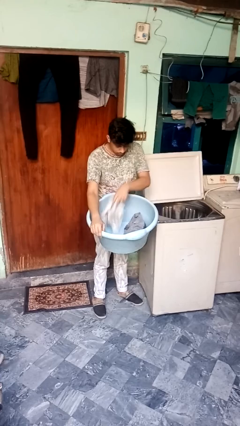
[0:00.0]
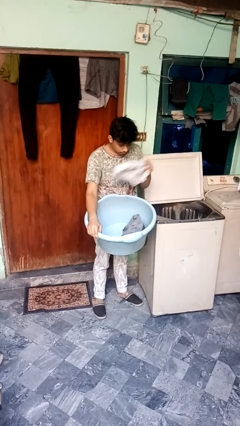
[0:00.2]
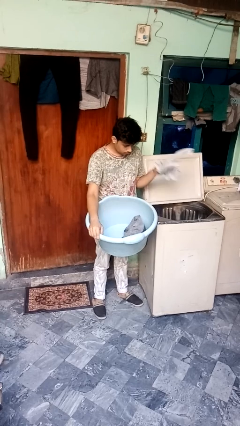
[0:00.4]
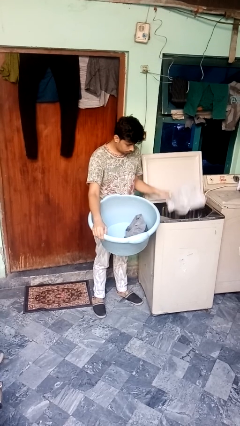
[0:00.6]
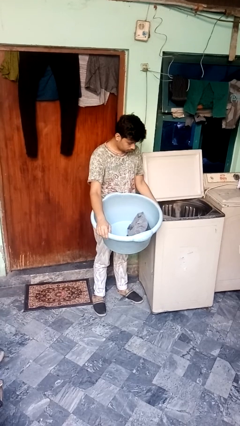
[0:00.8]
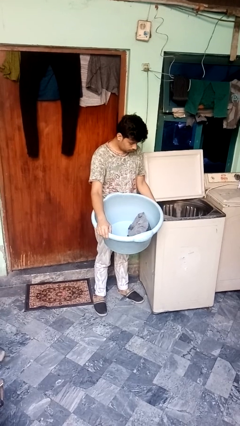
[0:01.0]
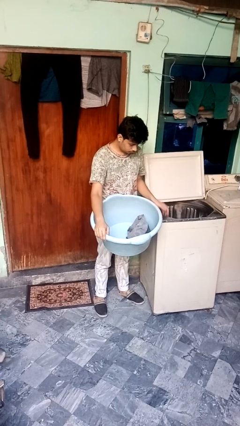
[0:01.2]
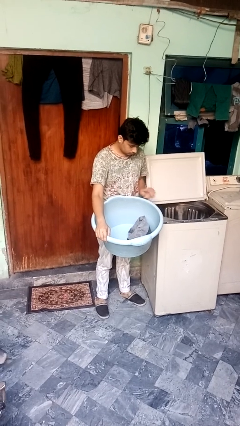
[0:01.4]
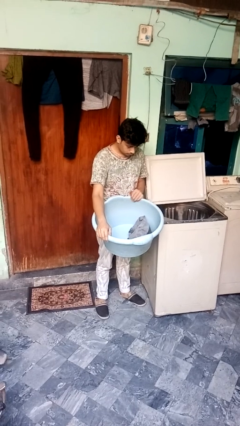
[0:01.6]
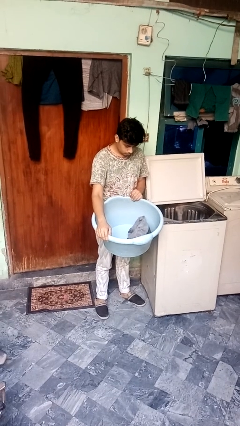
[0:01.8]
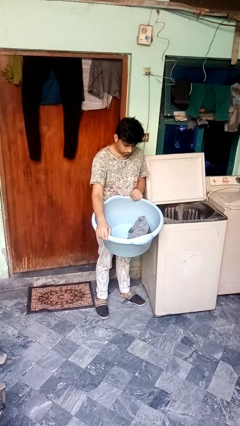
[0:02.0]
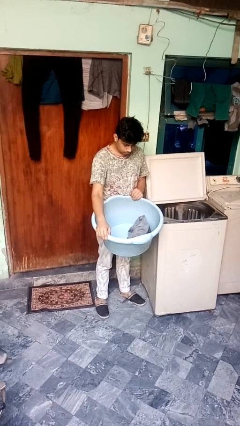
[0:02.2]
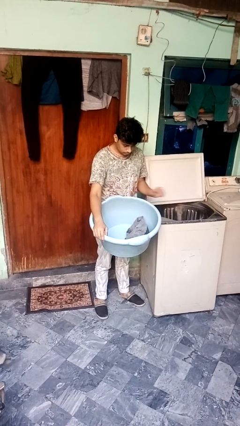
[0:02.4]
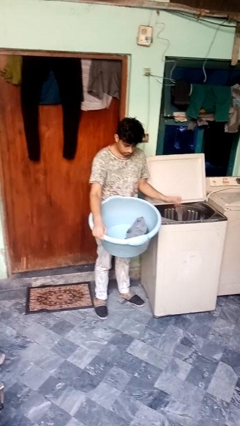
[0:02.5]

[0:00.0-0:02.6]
person unloads clotheswasher

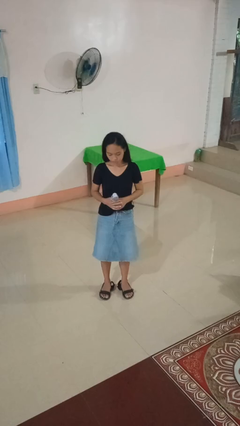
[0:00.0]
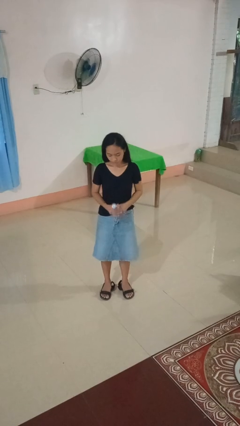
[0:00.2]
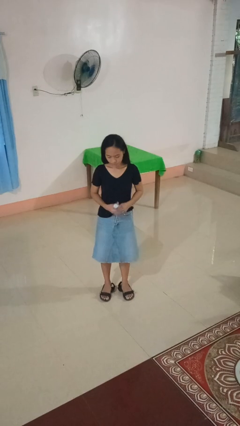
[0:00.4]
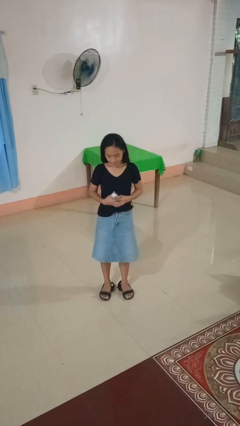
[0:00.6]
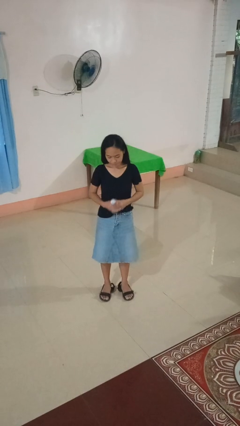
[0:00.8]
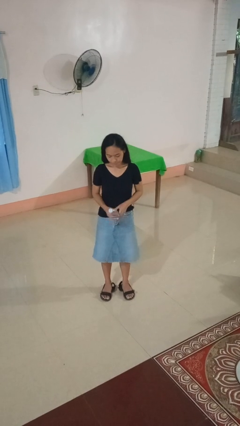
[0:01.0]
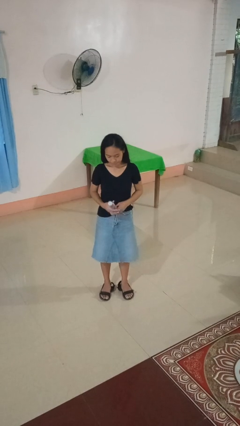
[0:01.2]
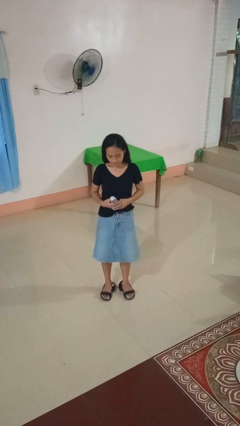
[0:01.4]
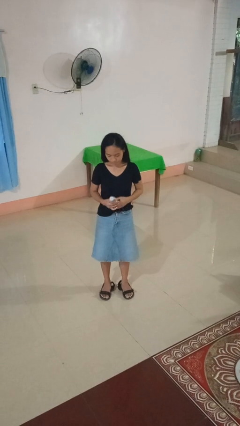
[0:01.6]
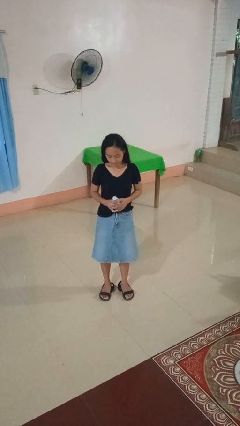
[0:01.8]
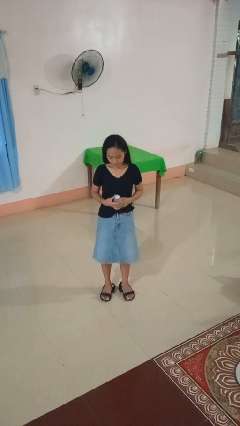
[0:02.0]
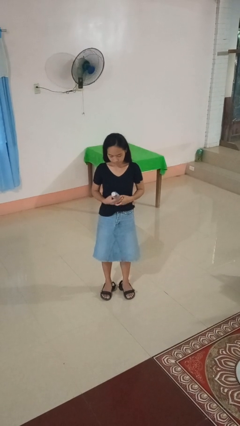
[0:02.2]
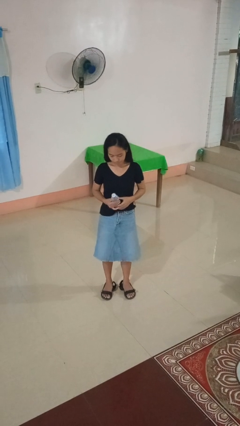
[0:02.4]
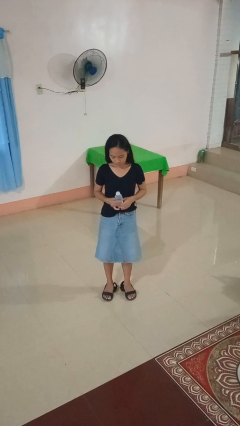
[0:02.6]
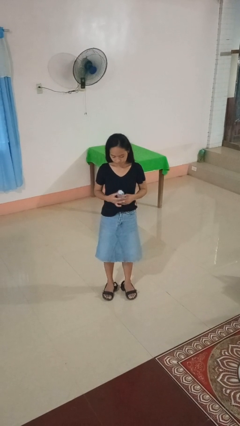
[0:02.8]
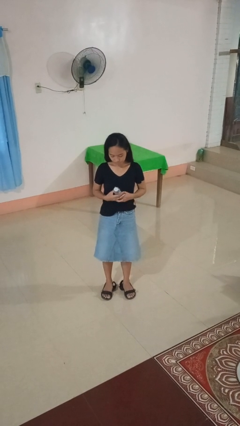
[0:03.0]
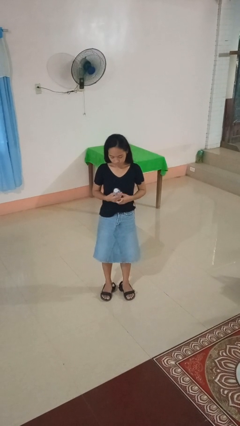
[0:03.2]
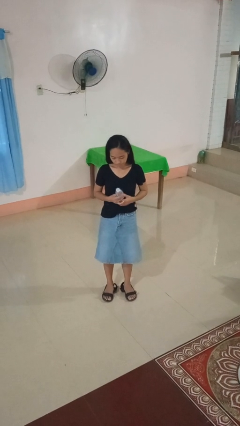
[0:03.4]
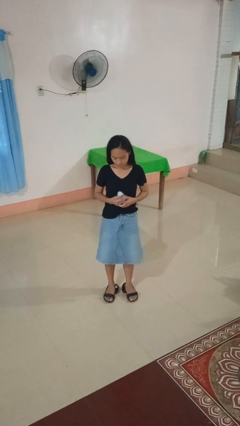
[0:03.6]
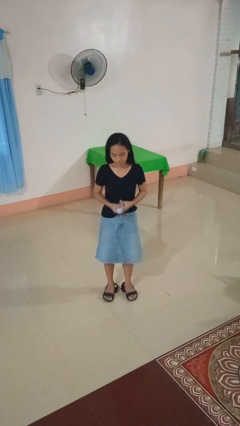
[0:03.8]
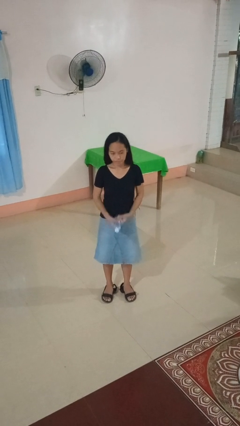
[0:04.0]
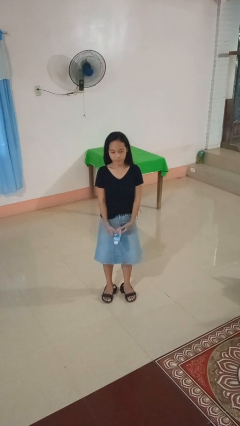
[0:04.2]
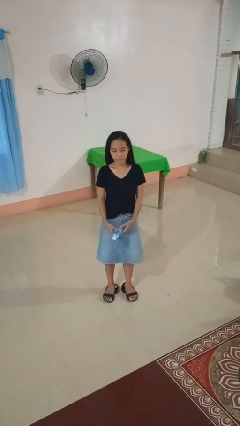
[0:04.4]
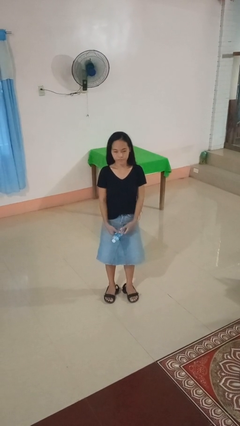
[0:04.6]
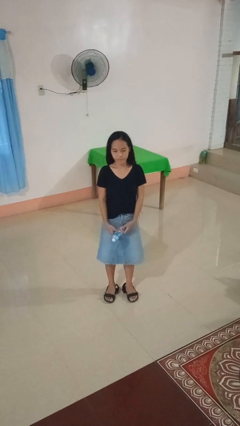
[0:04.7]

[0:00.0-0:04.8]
person squeezes object

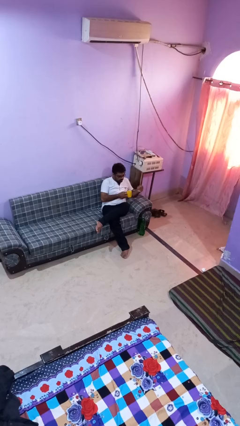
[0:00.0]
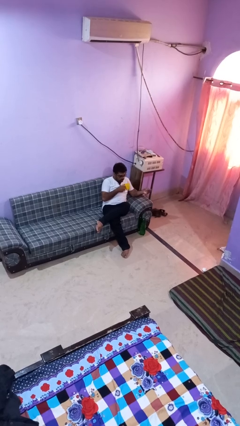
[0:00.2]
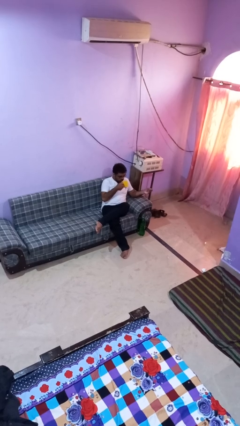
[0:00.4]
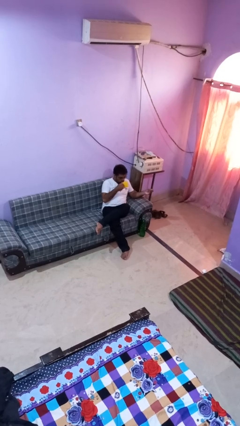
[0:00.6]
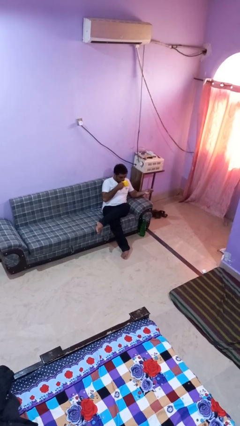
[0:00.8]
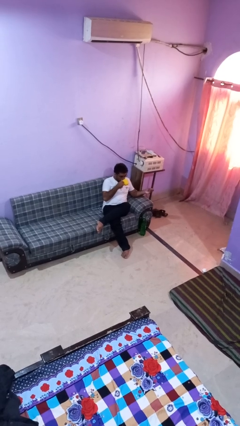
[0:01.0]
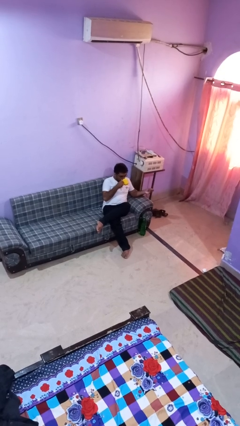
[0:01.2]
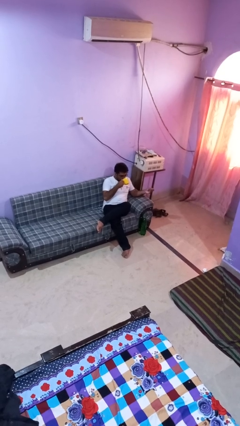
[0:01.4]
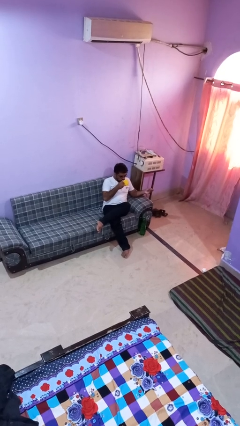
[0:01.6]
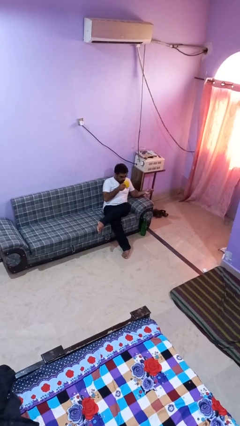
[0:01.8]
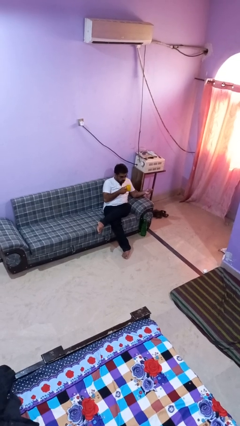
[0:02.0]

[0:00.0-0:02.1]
person drinks from mug

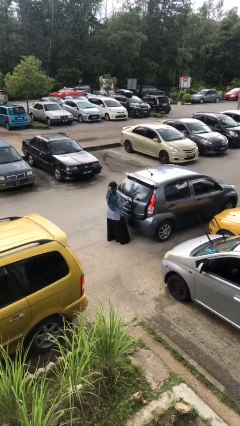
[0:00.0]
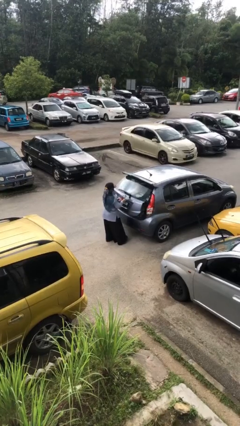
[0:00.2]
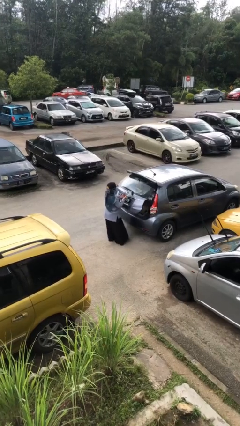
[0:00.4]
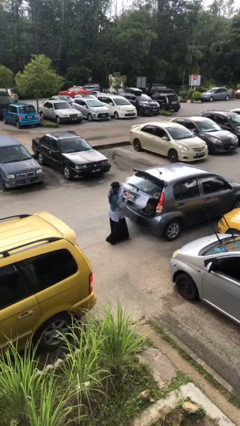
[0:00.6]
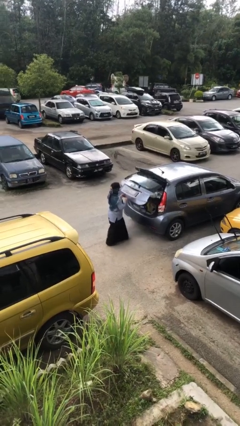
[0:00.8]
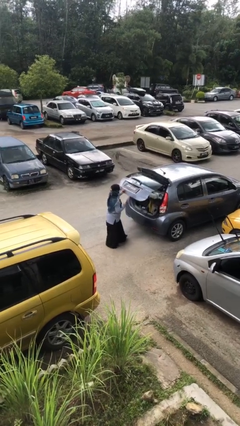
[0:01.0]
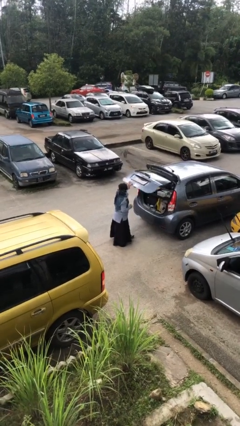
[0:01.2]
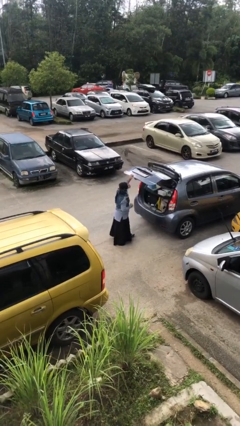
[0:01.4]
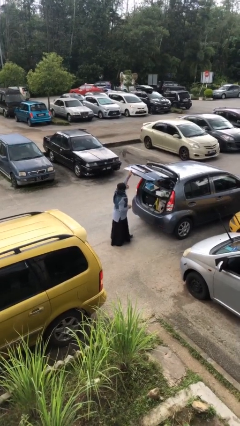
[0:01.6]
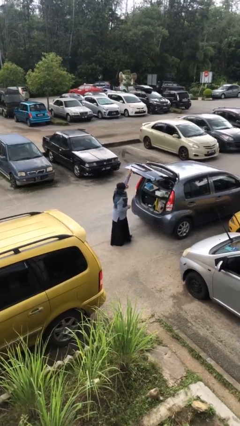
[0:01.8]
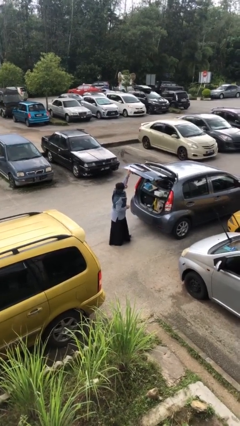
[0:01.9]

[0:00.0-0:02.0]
person opens car trunk

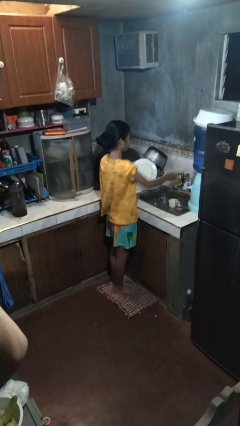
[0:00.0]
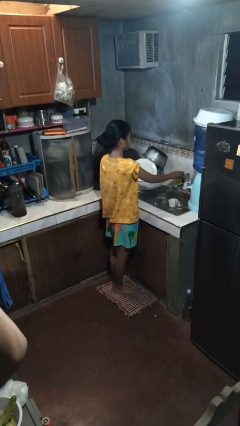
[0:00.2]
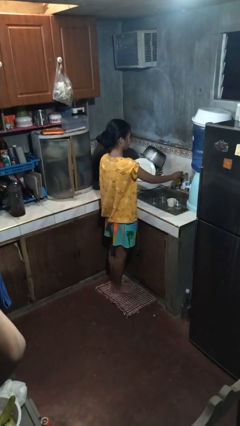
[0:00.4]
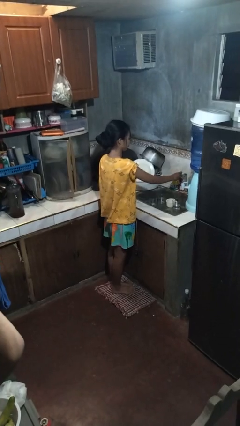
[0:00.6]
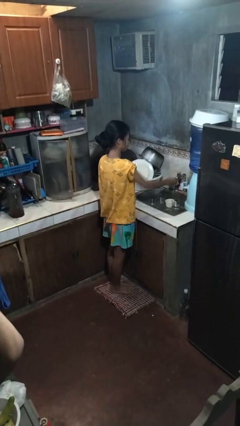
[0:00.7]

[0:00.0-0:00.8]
person turns on faucet

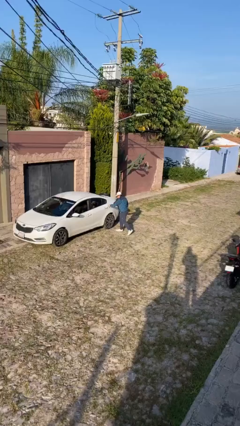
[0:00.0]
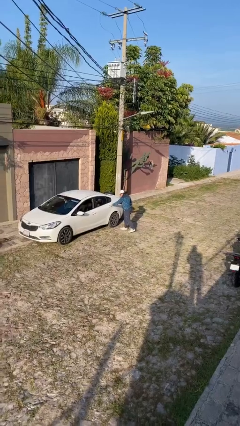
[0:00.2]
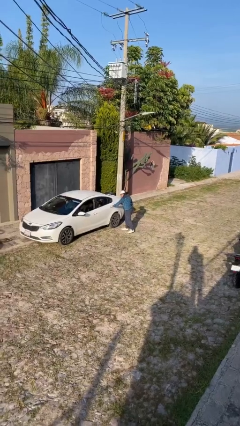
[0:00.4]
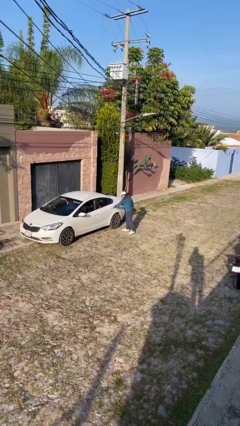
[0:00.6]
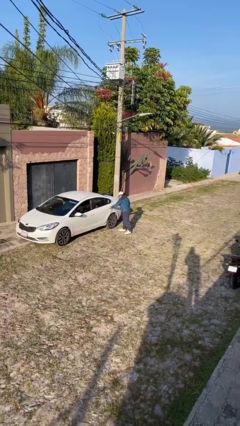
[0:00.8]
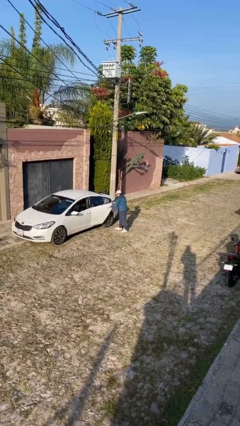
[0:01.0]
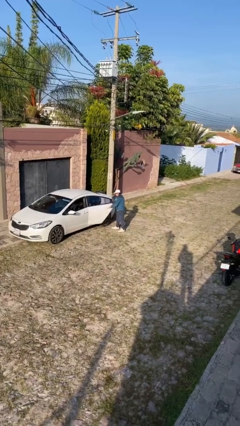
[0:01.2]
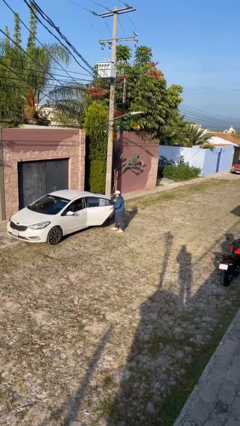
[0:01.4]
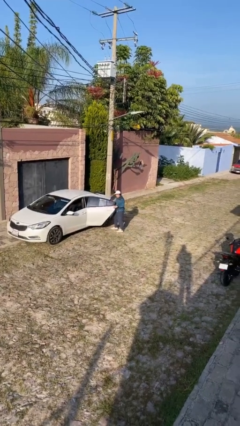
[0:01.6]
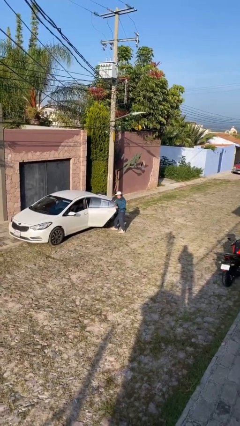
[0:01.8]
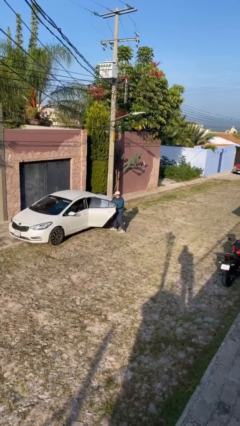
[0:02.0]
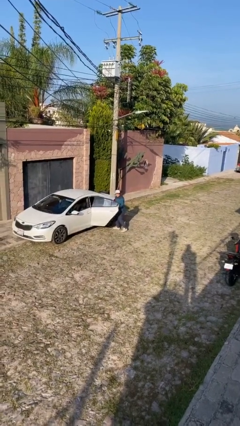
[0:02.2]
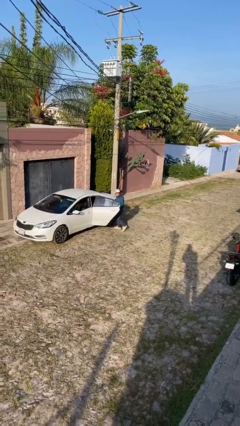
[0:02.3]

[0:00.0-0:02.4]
person opens car door

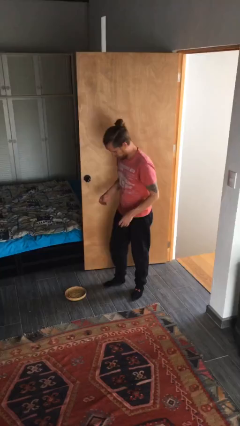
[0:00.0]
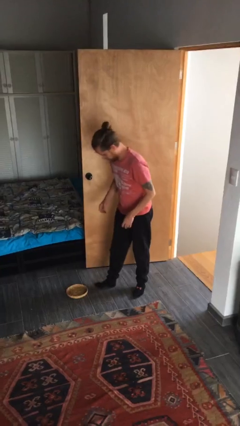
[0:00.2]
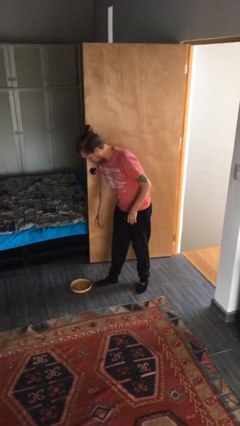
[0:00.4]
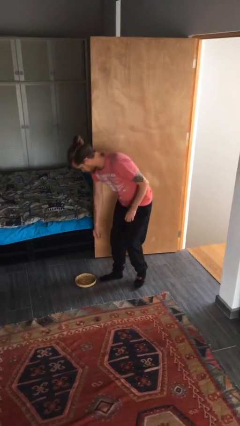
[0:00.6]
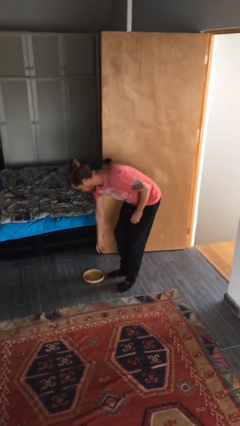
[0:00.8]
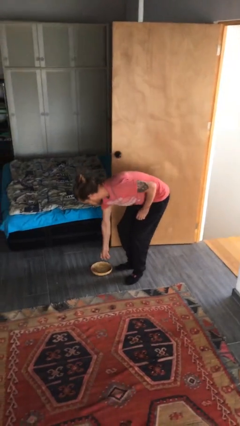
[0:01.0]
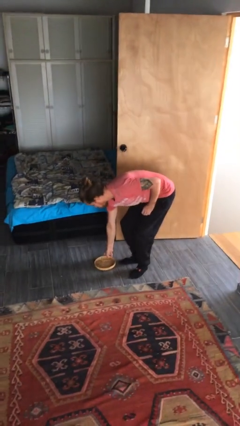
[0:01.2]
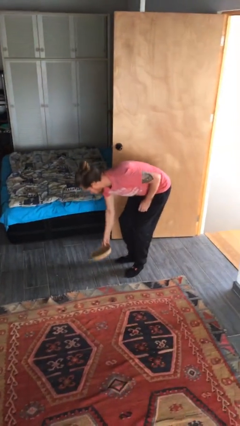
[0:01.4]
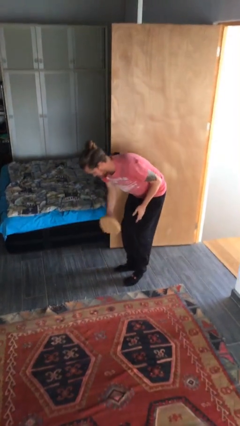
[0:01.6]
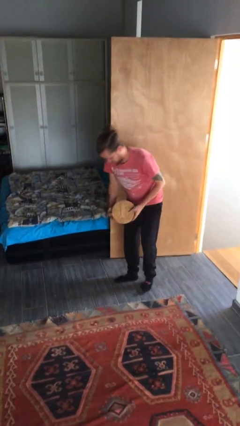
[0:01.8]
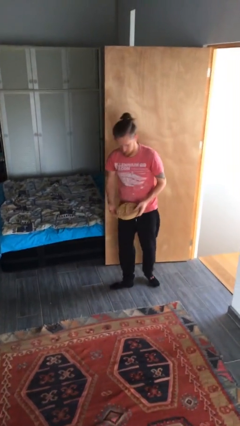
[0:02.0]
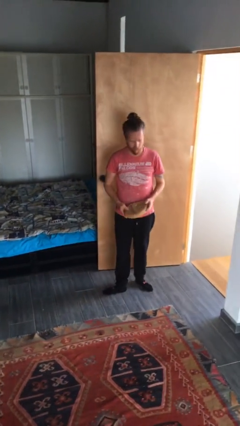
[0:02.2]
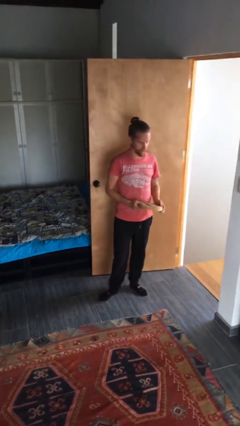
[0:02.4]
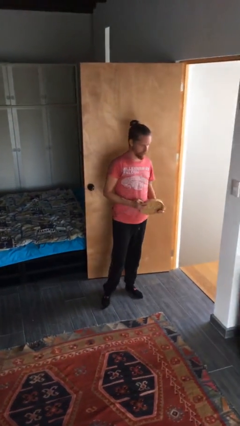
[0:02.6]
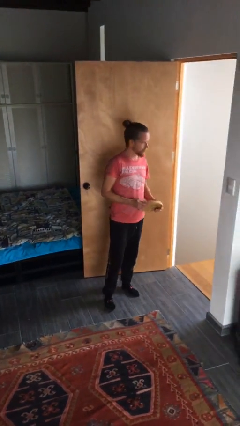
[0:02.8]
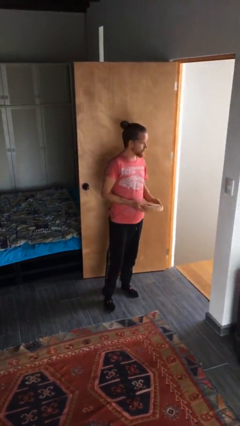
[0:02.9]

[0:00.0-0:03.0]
person picks up object from floor
